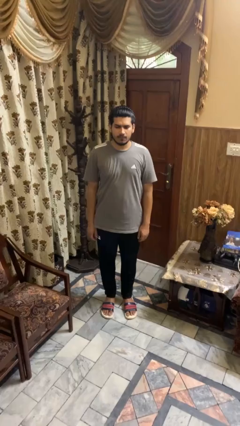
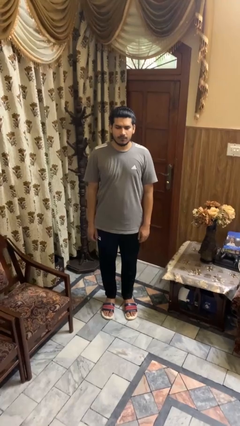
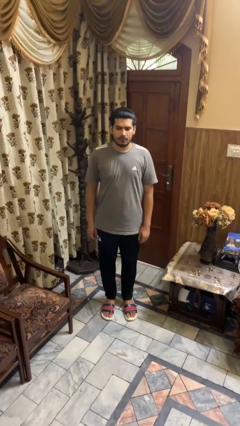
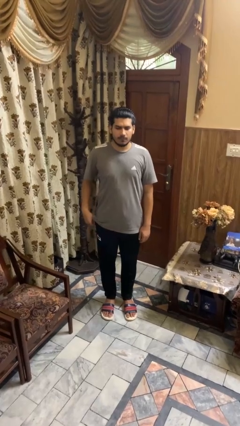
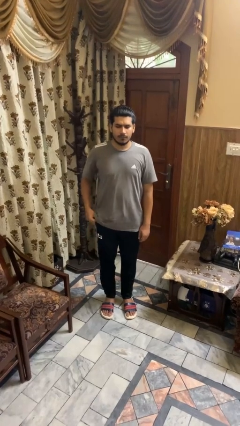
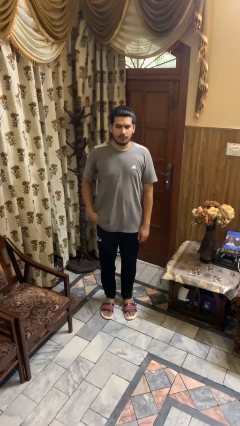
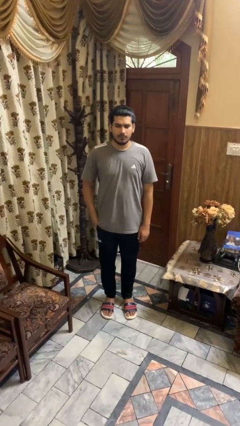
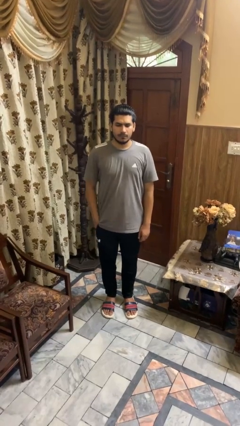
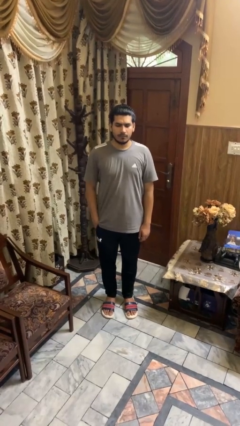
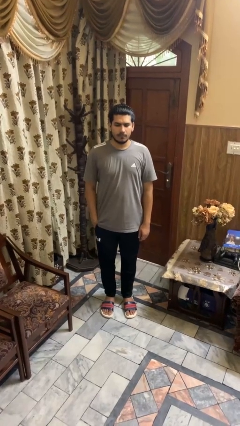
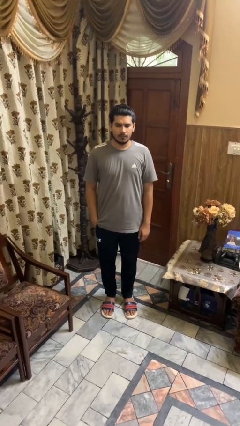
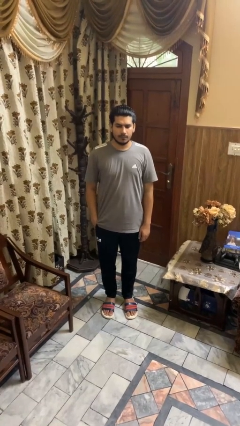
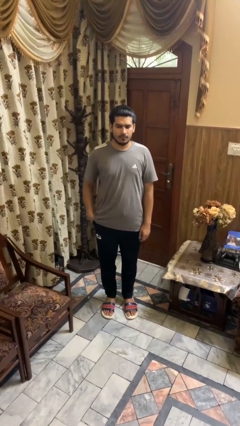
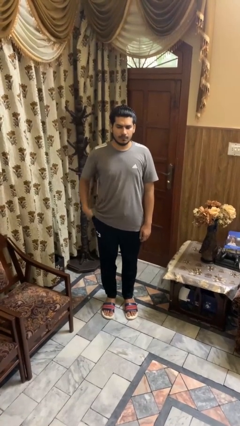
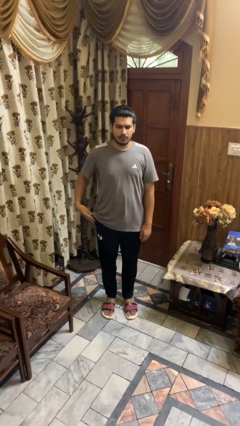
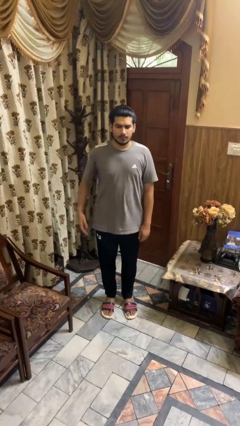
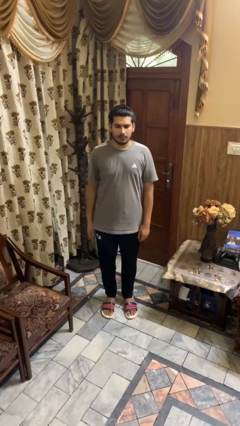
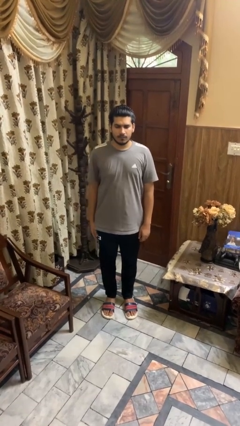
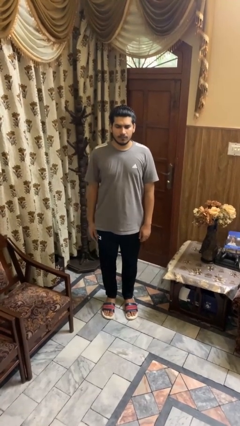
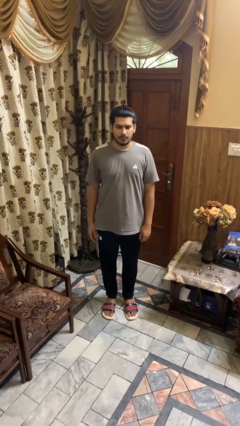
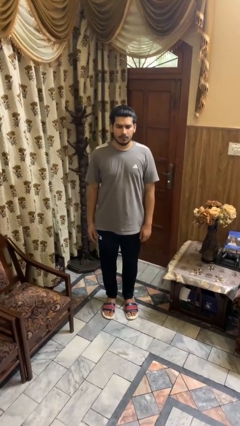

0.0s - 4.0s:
person puts hands in back pockets

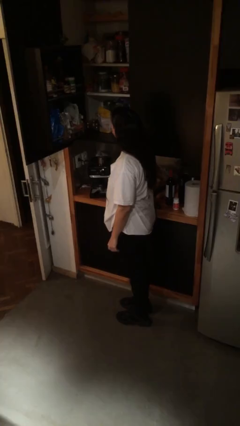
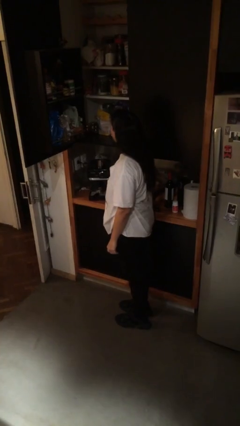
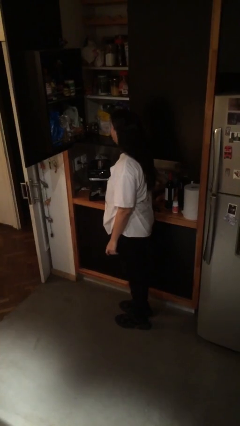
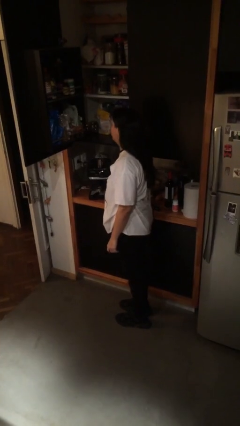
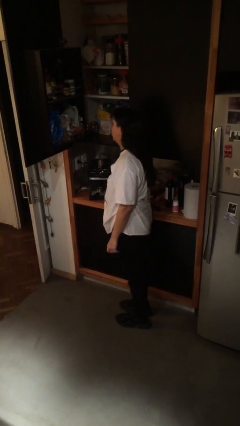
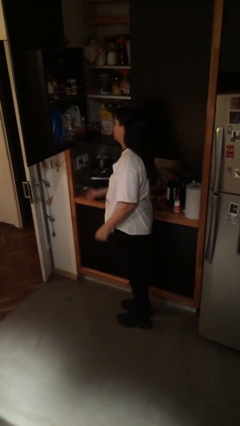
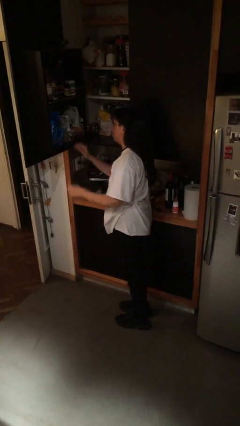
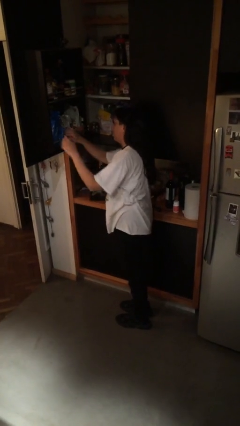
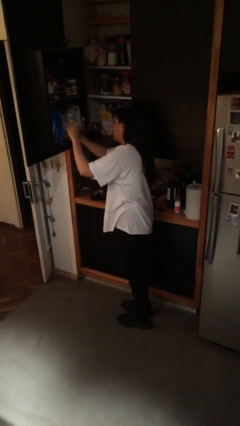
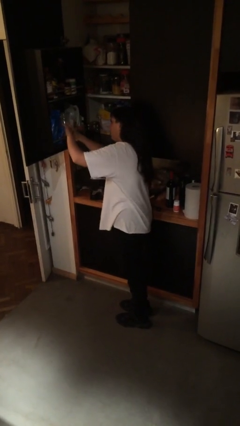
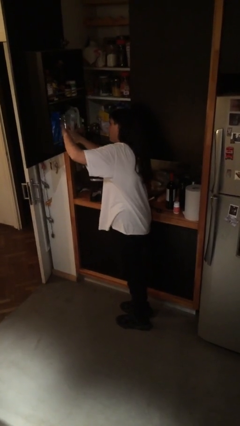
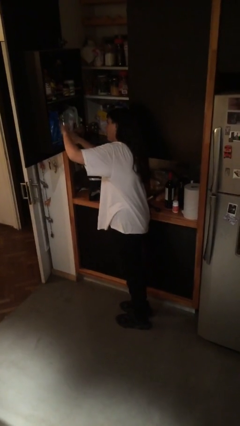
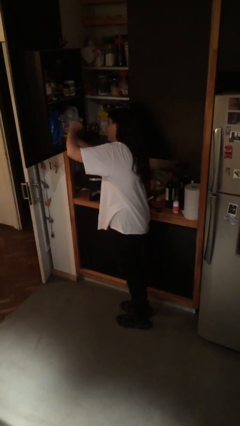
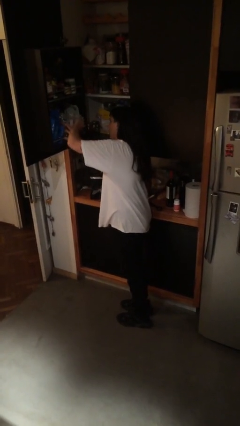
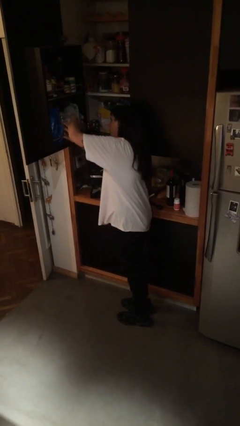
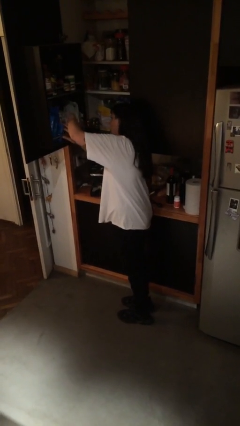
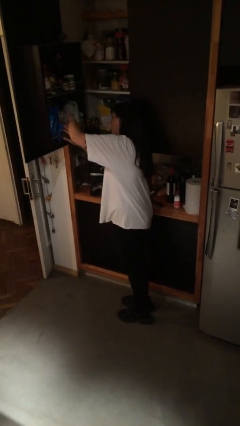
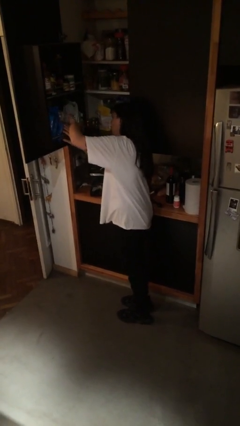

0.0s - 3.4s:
person searches in cabinet

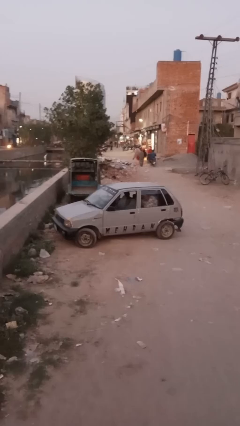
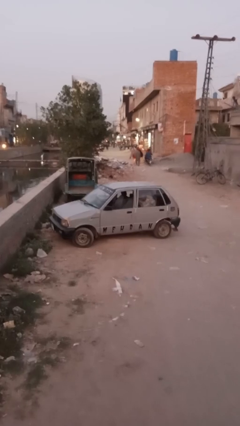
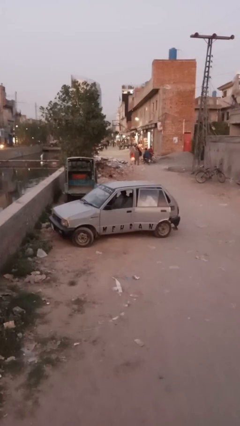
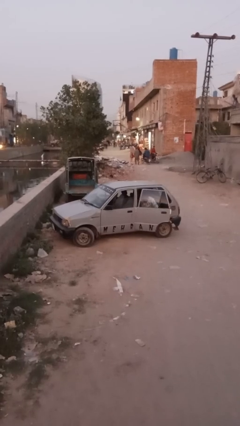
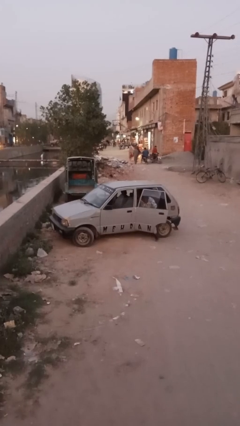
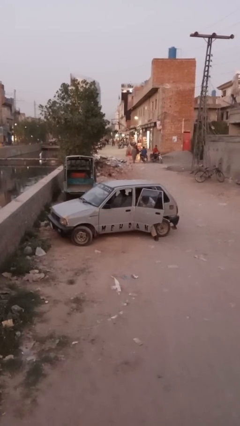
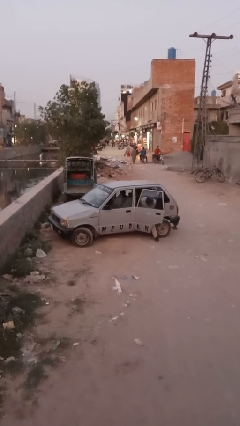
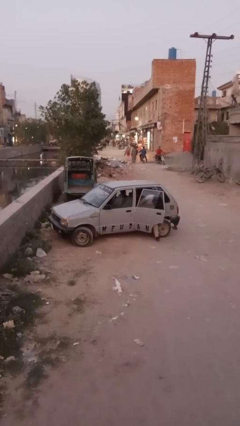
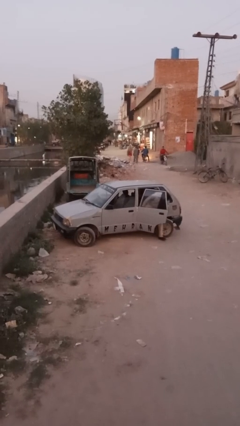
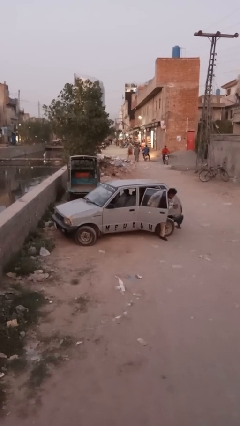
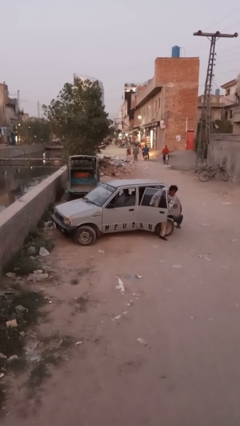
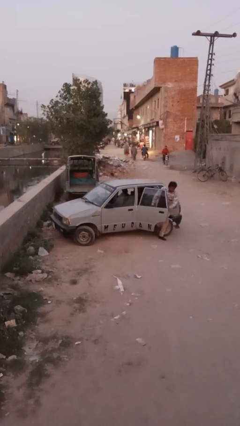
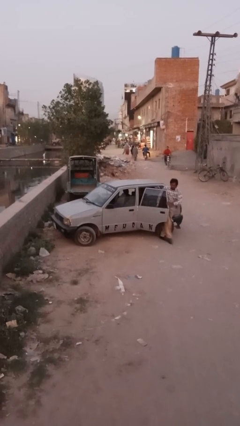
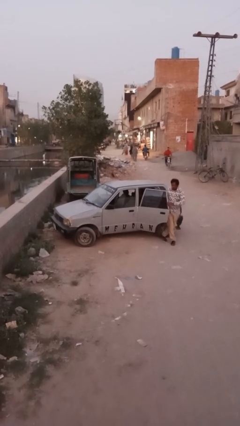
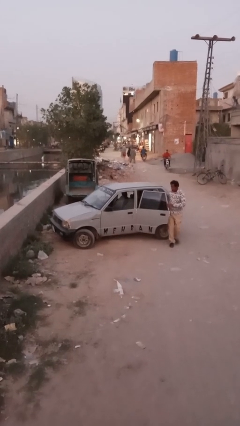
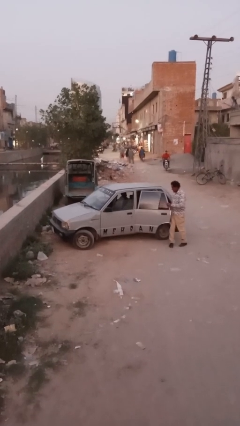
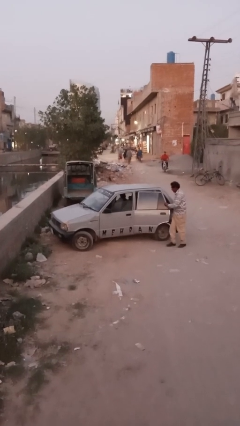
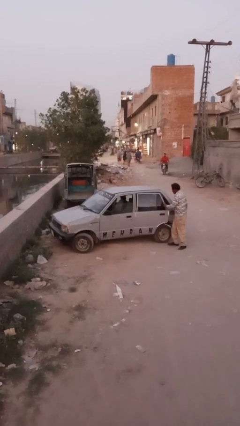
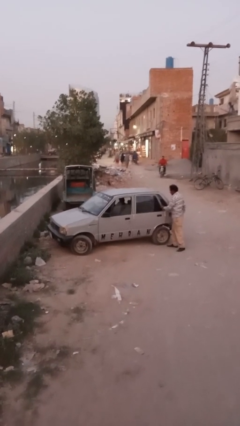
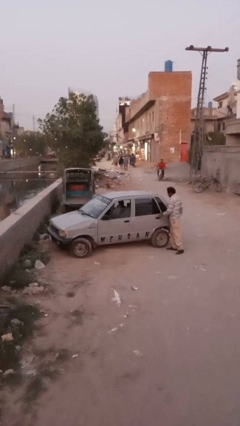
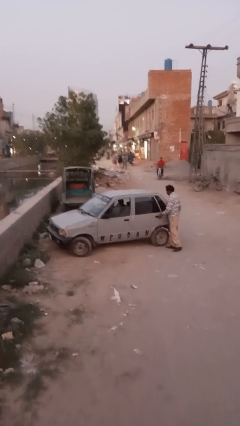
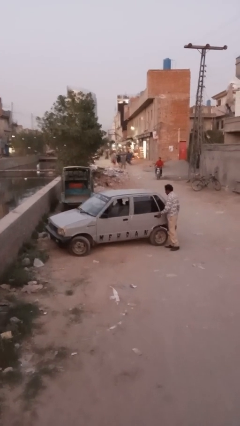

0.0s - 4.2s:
car drops off person

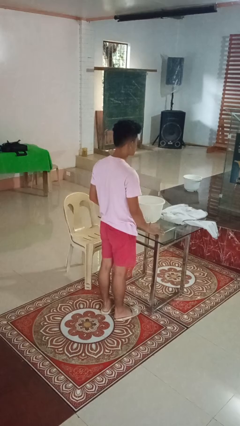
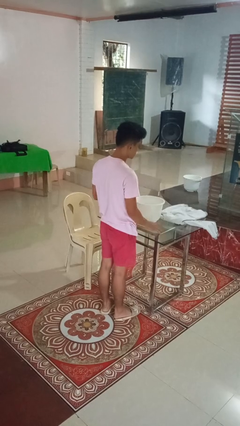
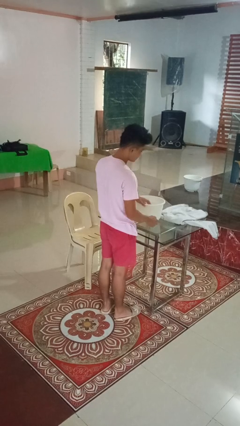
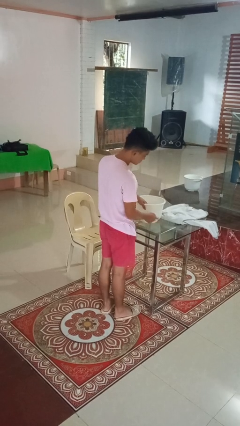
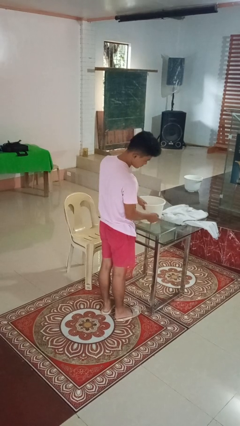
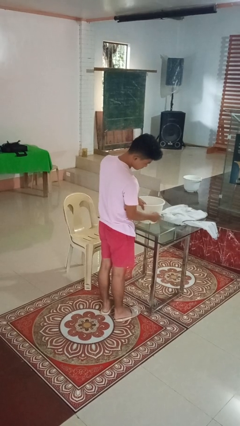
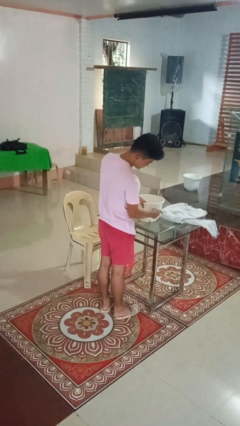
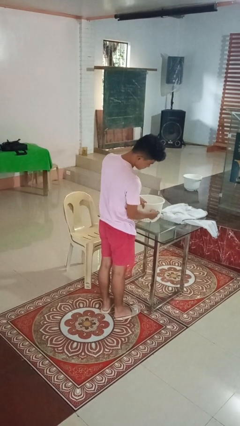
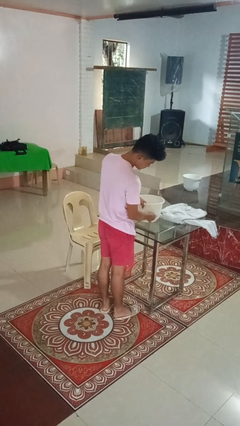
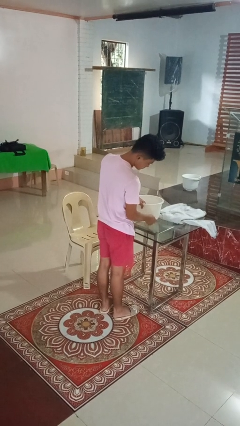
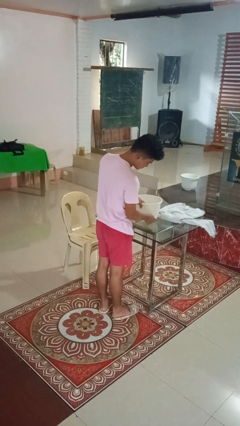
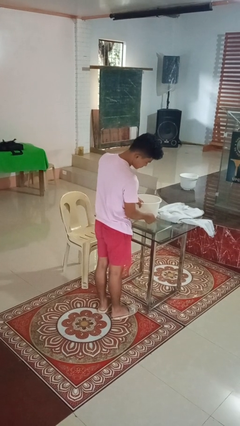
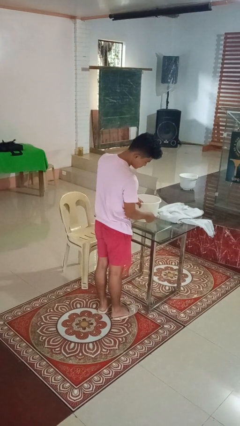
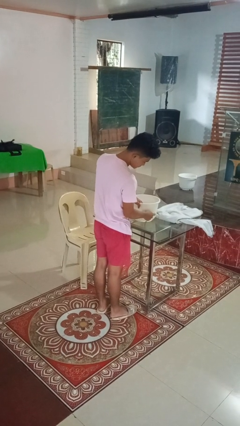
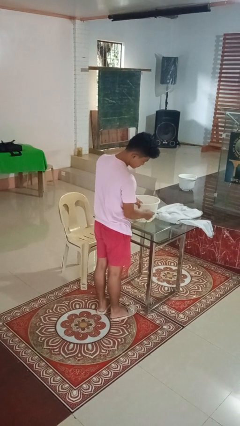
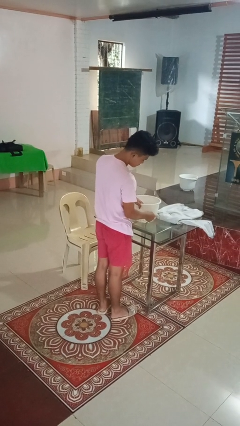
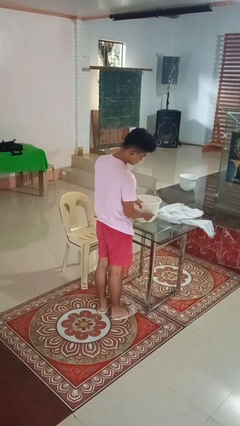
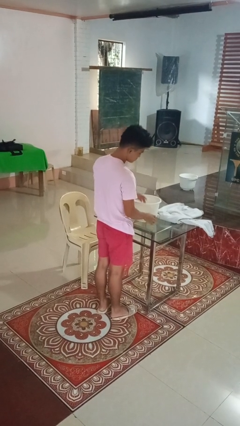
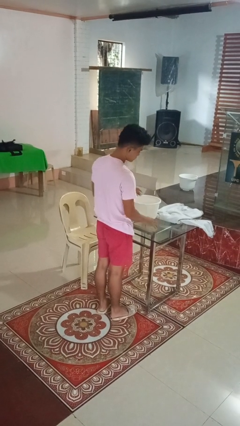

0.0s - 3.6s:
person taps object with finger

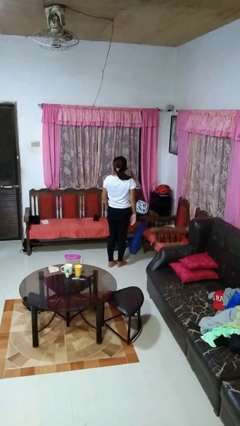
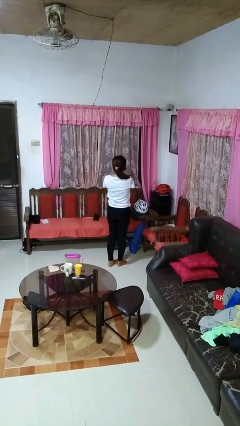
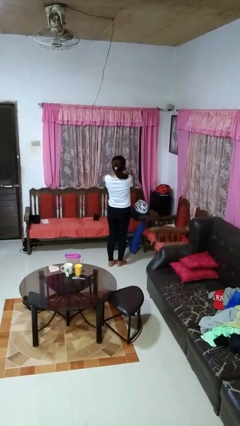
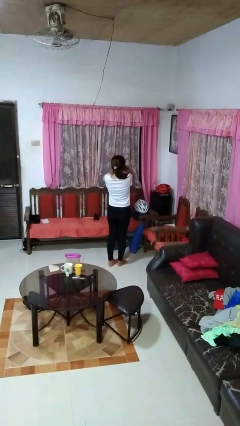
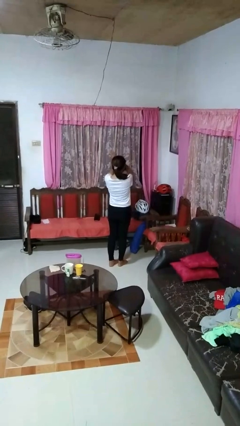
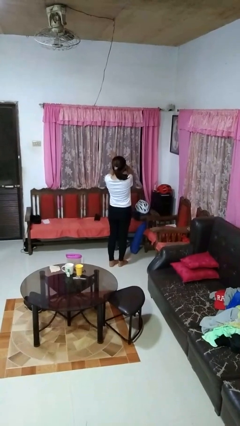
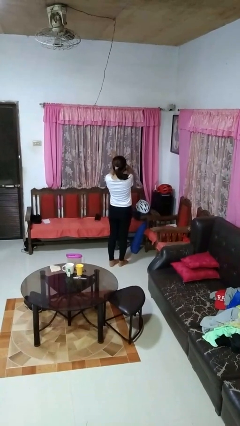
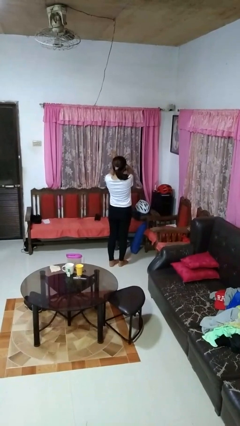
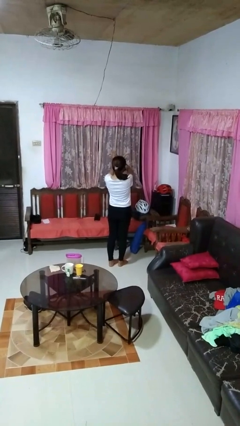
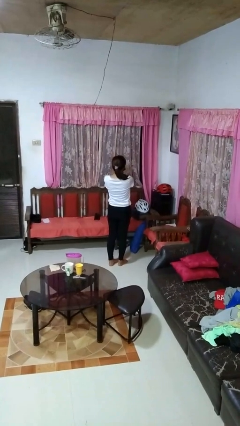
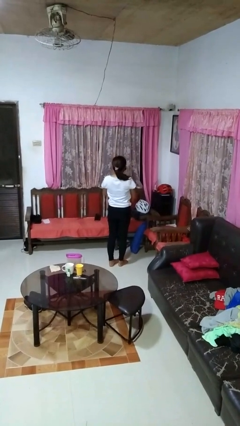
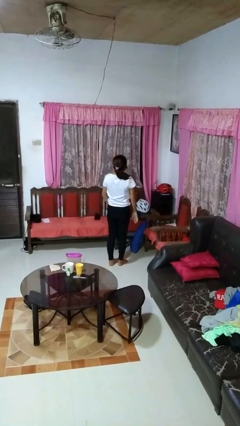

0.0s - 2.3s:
person gestures arms x
